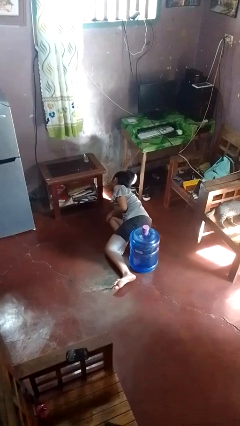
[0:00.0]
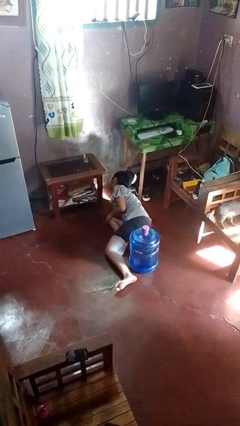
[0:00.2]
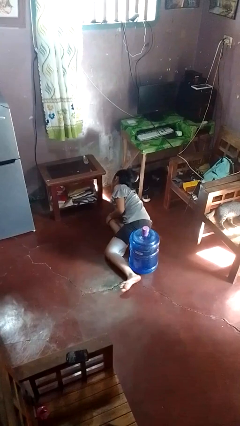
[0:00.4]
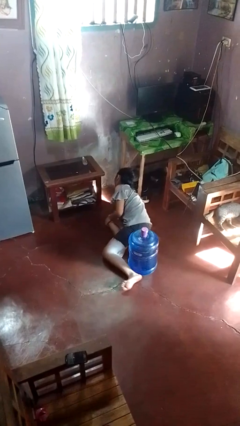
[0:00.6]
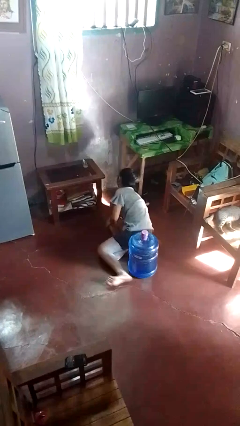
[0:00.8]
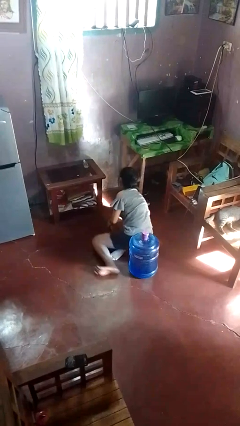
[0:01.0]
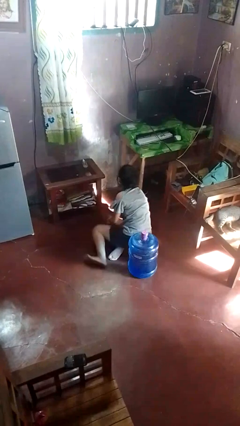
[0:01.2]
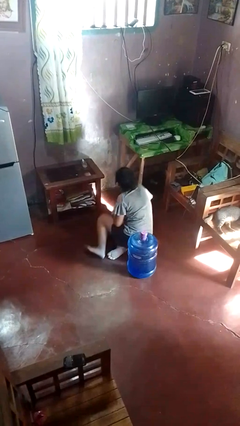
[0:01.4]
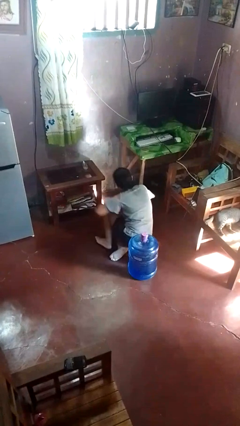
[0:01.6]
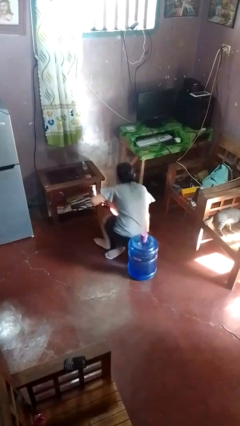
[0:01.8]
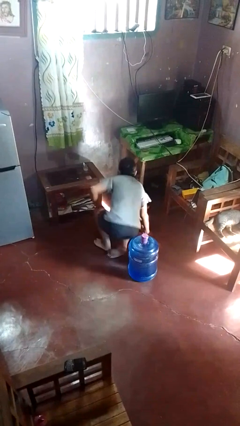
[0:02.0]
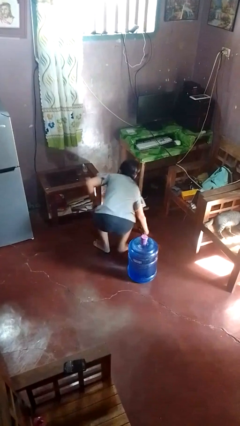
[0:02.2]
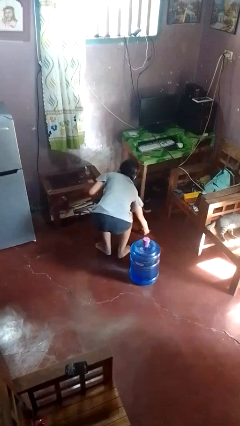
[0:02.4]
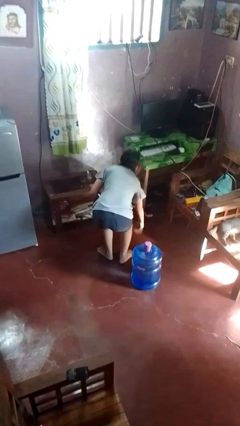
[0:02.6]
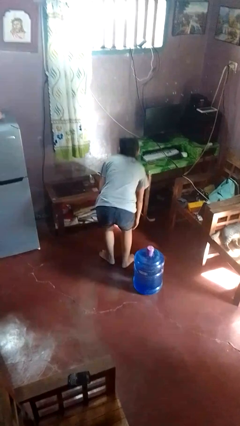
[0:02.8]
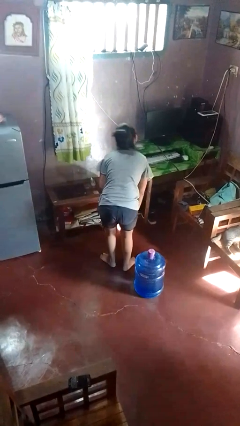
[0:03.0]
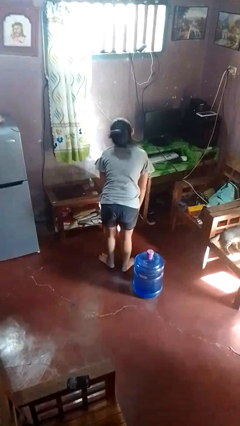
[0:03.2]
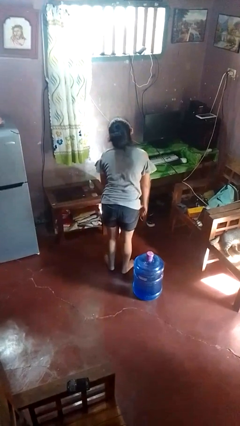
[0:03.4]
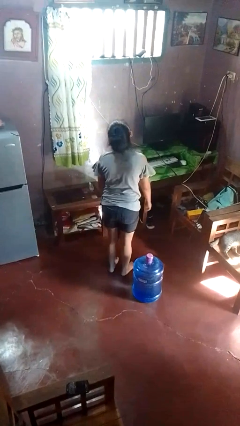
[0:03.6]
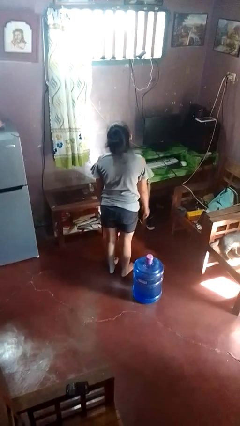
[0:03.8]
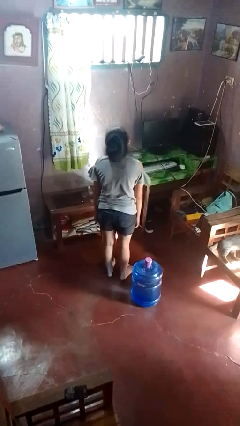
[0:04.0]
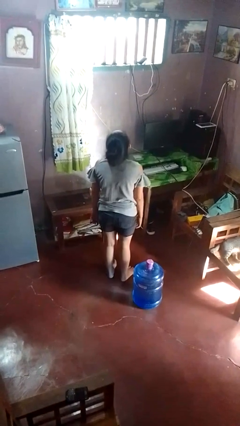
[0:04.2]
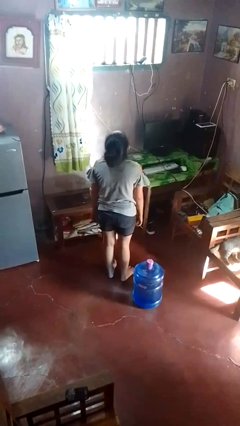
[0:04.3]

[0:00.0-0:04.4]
person stands up from floor

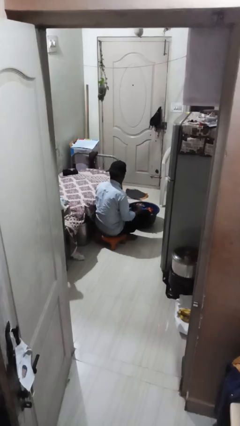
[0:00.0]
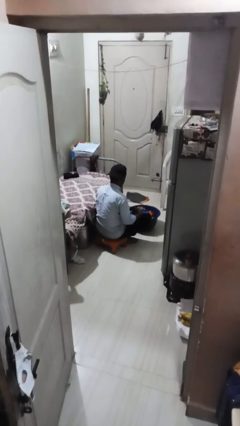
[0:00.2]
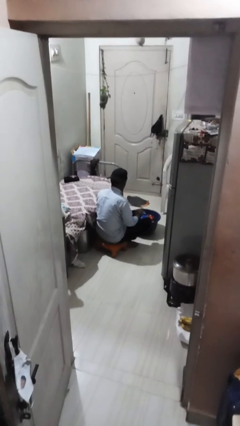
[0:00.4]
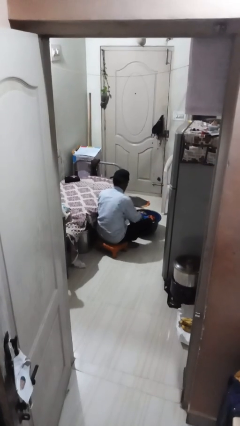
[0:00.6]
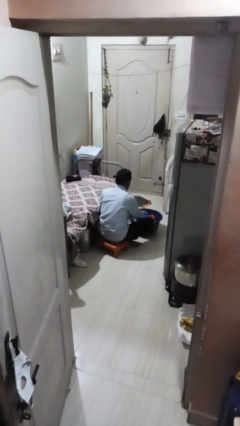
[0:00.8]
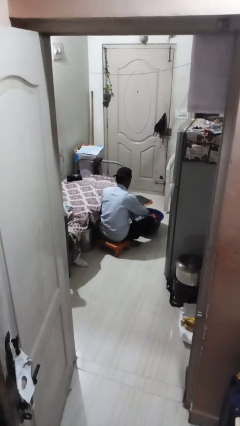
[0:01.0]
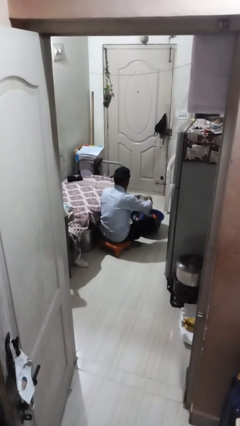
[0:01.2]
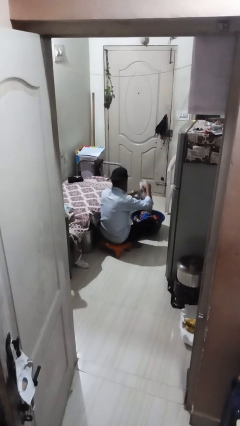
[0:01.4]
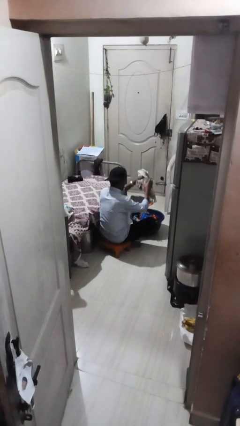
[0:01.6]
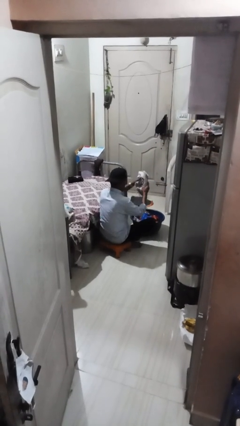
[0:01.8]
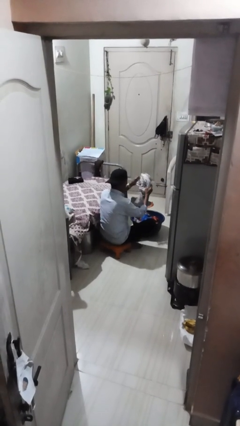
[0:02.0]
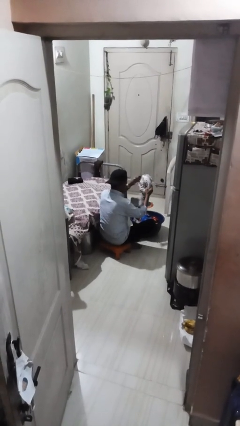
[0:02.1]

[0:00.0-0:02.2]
person takes object from basket

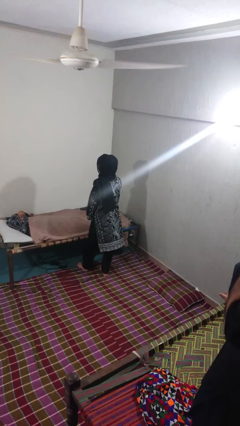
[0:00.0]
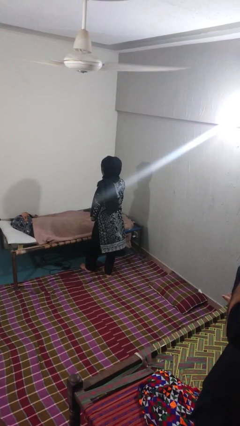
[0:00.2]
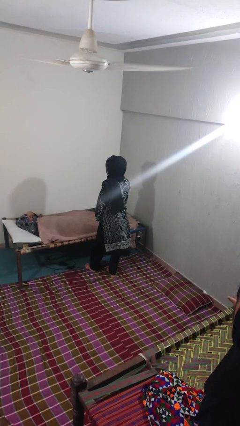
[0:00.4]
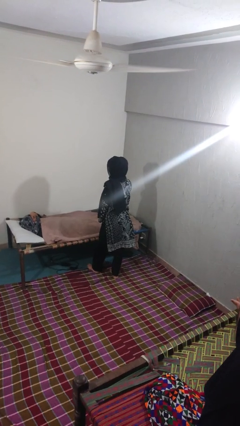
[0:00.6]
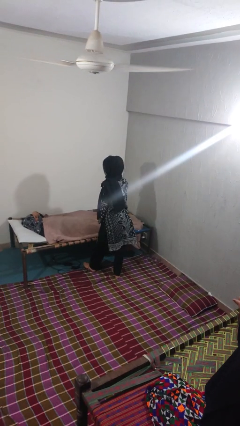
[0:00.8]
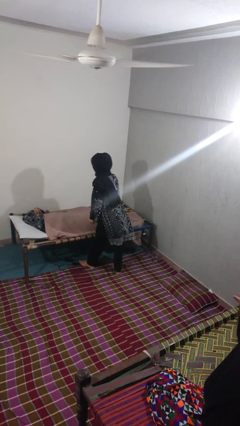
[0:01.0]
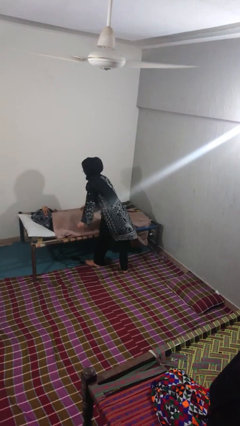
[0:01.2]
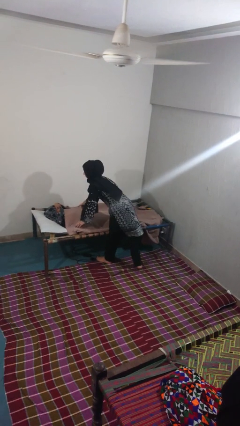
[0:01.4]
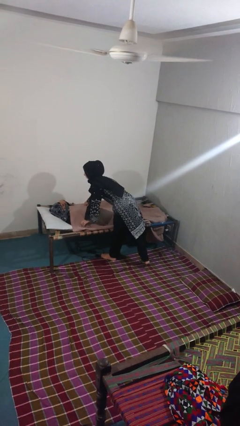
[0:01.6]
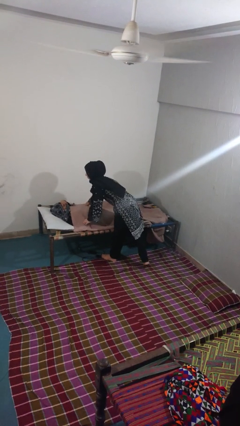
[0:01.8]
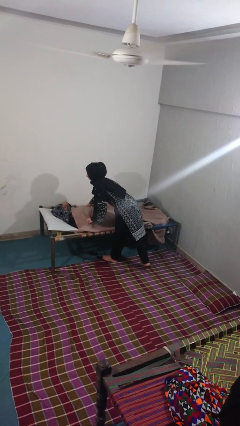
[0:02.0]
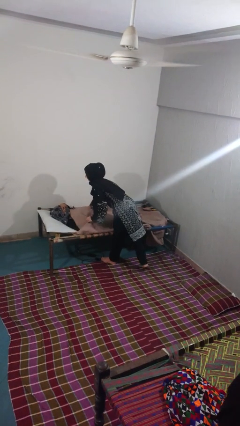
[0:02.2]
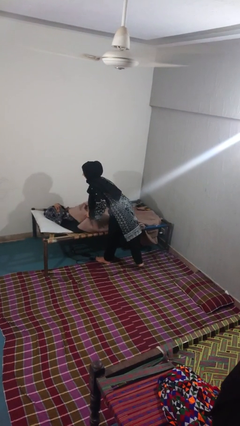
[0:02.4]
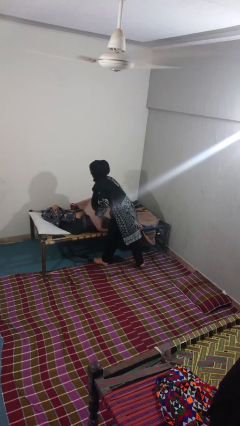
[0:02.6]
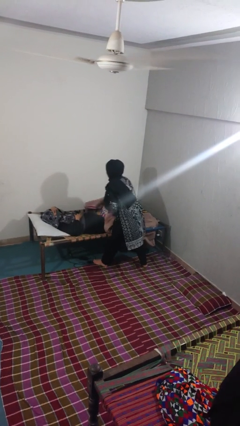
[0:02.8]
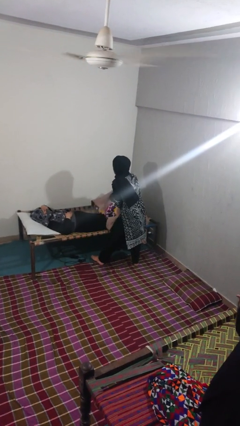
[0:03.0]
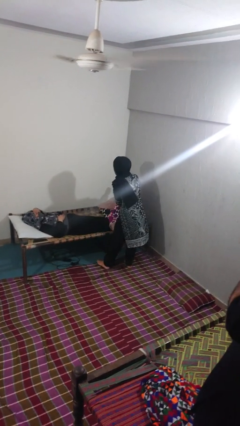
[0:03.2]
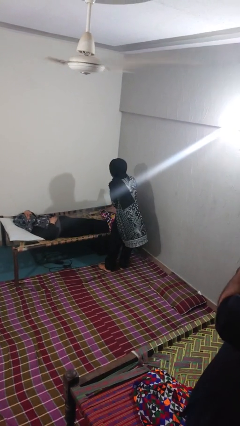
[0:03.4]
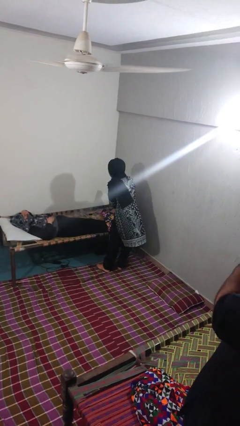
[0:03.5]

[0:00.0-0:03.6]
person uncovers friend with blanket

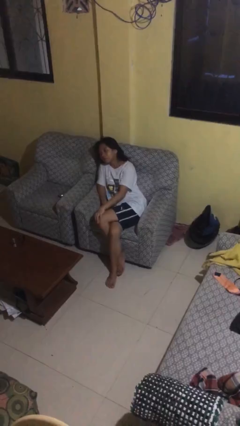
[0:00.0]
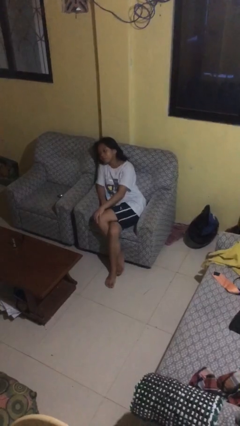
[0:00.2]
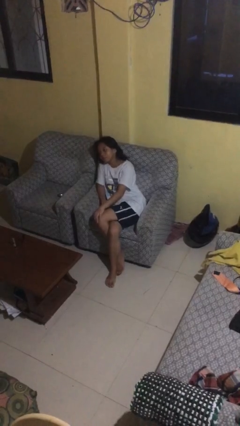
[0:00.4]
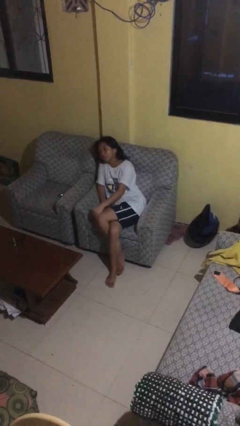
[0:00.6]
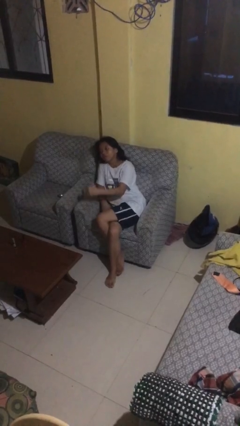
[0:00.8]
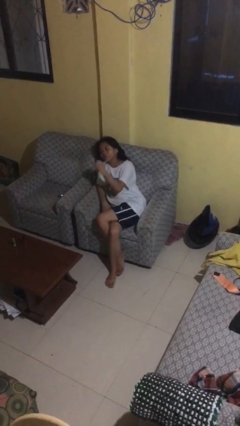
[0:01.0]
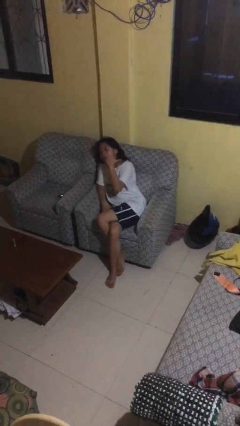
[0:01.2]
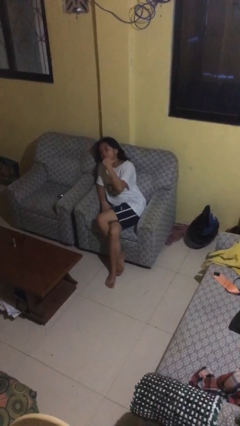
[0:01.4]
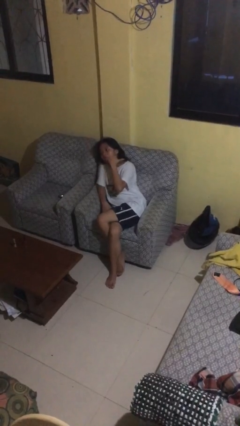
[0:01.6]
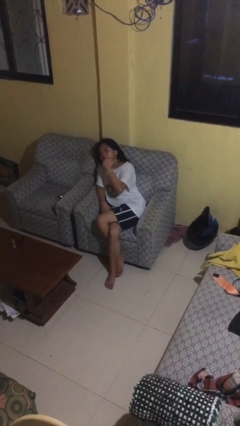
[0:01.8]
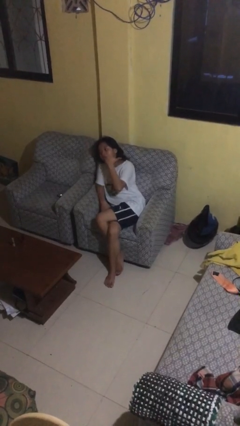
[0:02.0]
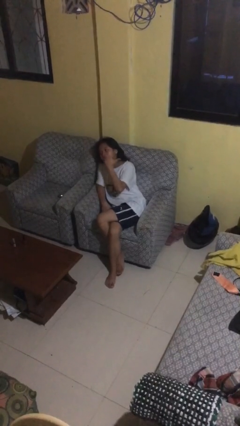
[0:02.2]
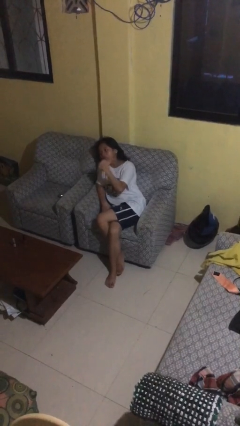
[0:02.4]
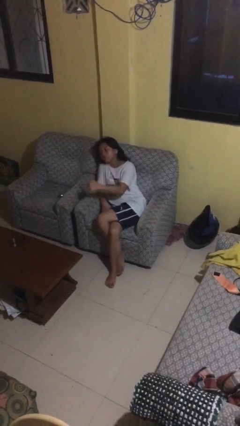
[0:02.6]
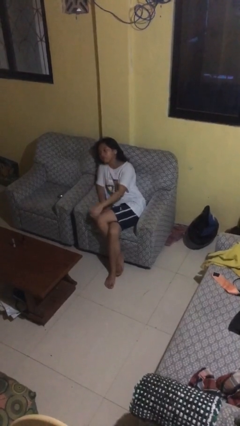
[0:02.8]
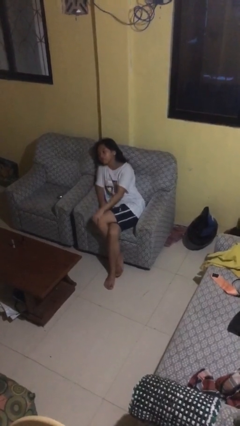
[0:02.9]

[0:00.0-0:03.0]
person gestures behind me

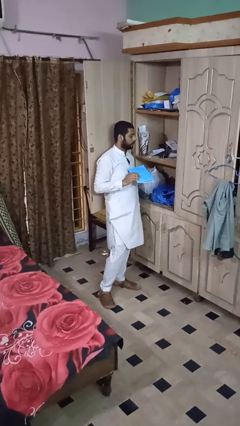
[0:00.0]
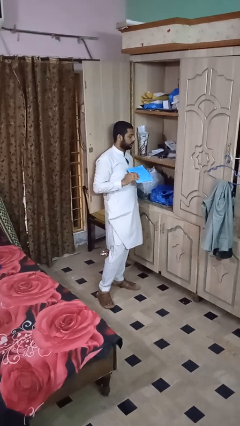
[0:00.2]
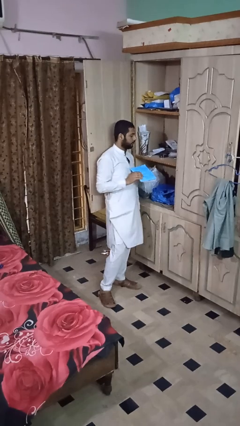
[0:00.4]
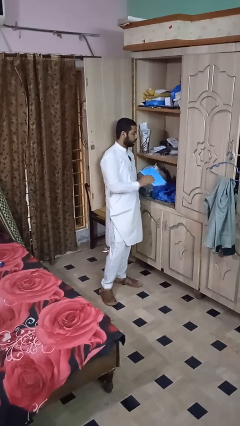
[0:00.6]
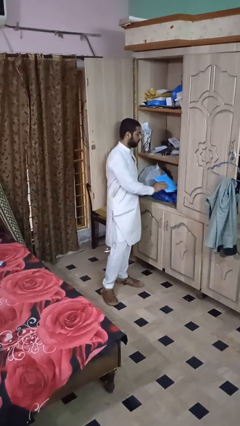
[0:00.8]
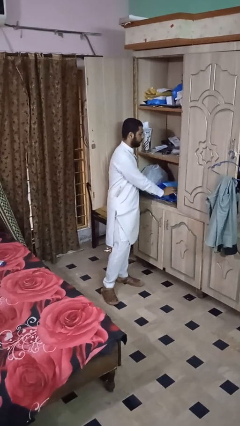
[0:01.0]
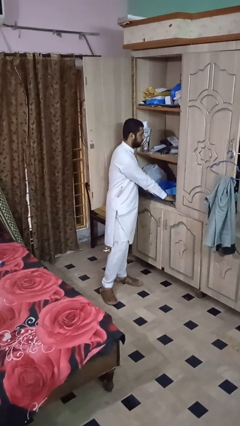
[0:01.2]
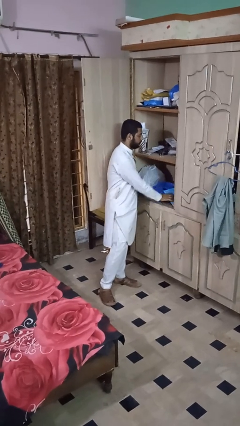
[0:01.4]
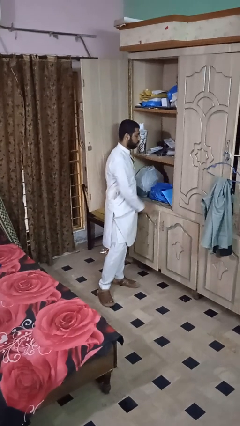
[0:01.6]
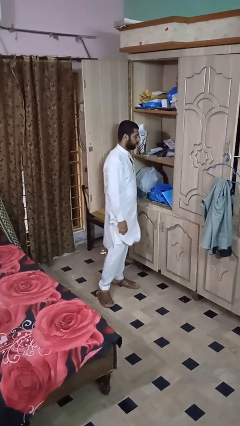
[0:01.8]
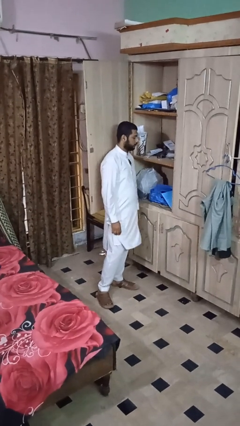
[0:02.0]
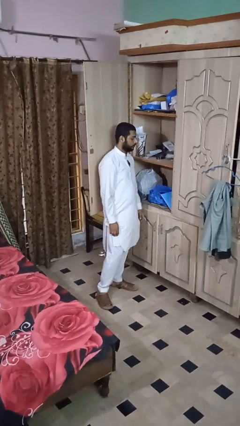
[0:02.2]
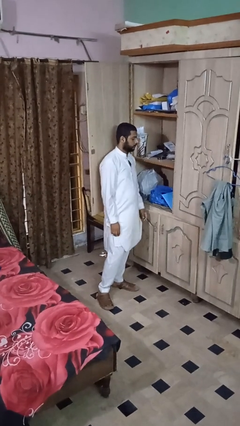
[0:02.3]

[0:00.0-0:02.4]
person puts down object on shelf

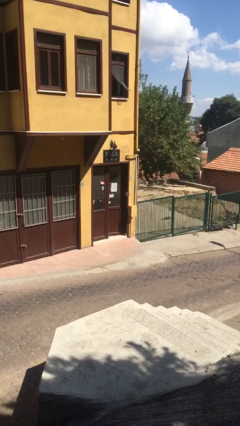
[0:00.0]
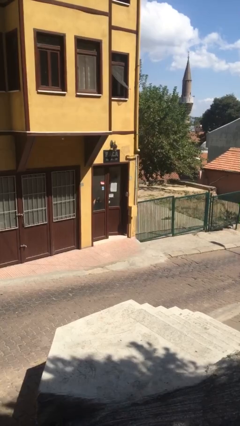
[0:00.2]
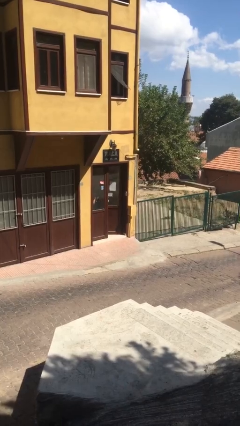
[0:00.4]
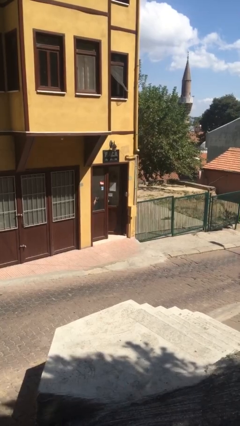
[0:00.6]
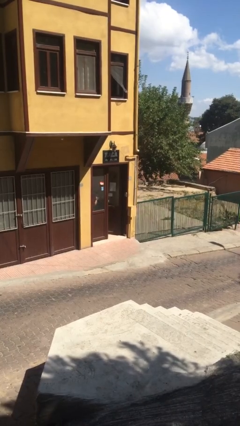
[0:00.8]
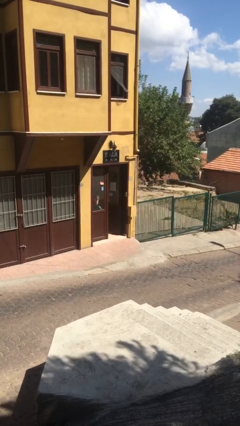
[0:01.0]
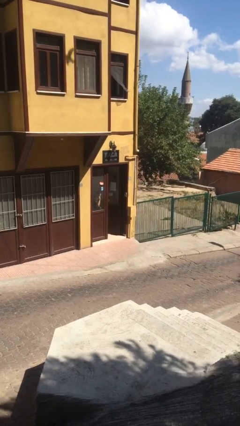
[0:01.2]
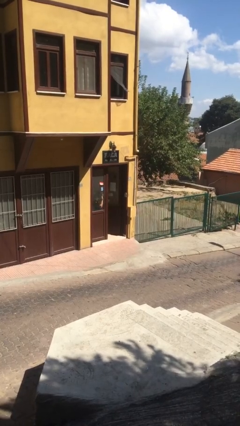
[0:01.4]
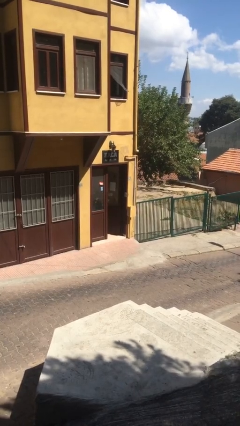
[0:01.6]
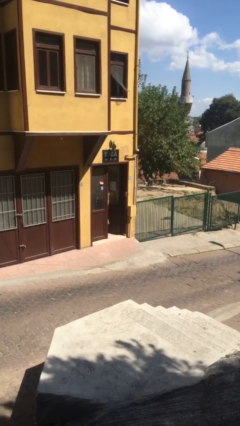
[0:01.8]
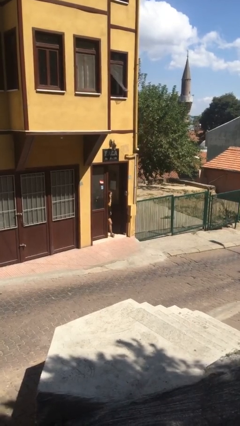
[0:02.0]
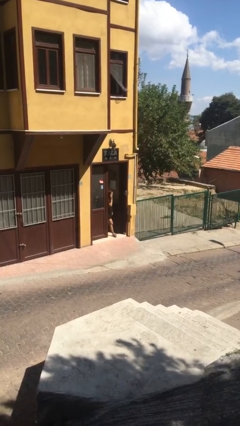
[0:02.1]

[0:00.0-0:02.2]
person opens facility door
